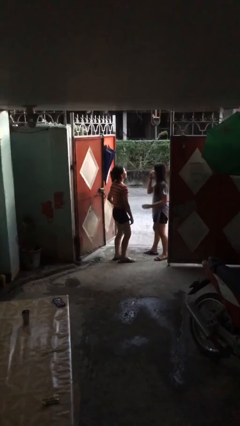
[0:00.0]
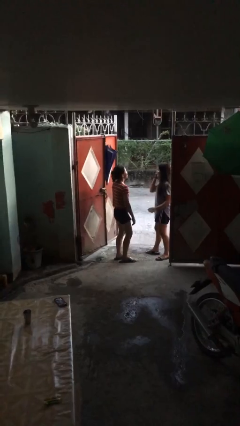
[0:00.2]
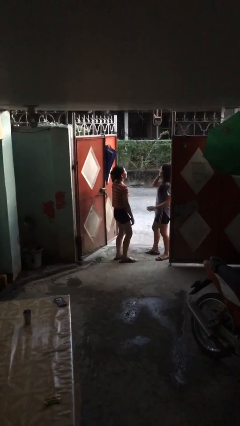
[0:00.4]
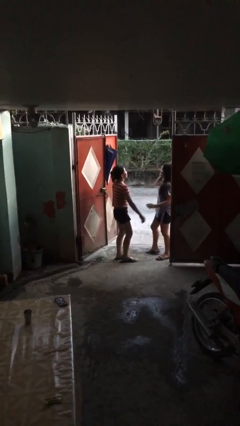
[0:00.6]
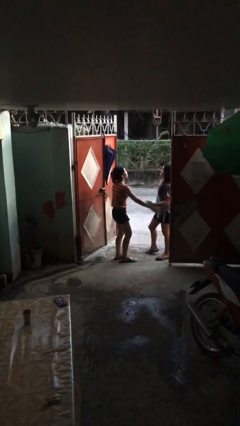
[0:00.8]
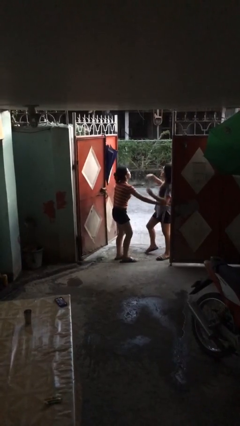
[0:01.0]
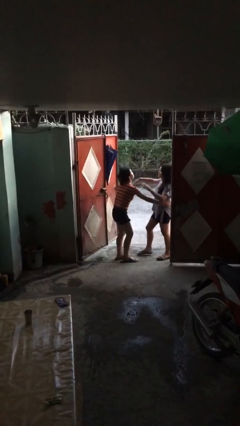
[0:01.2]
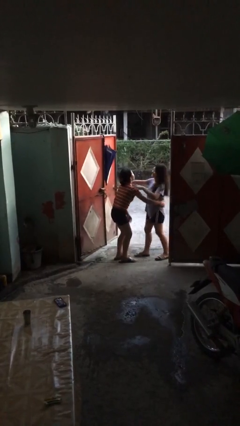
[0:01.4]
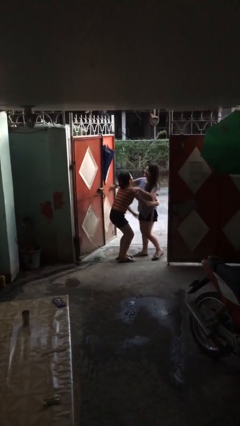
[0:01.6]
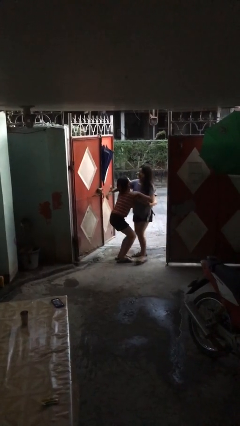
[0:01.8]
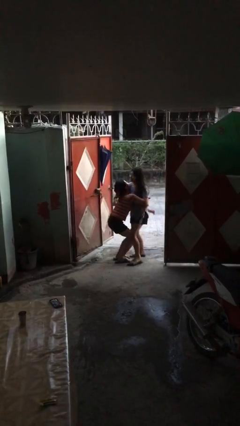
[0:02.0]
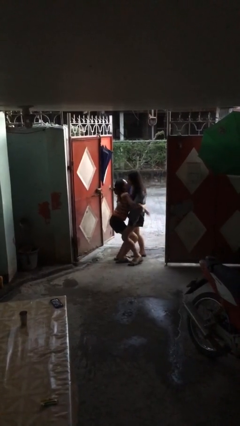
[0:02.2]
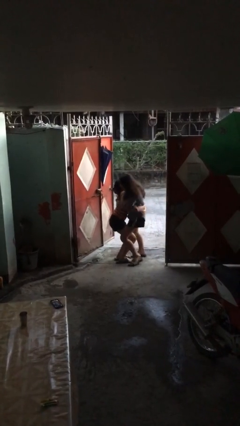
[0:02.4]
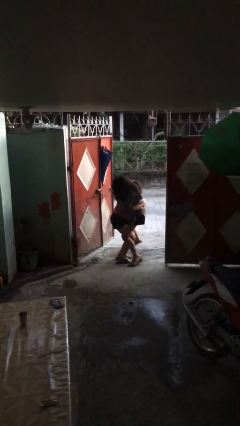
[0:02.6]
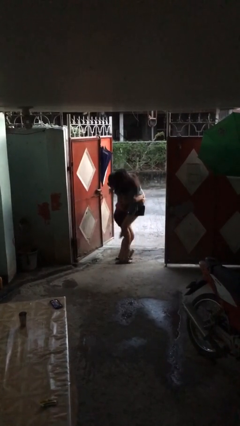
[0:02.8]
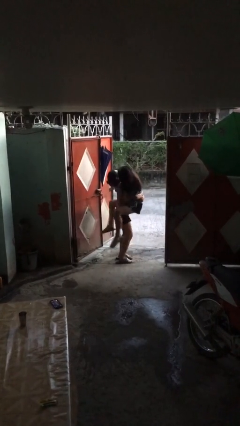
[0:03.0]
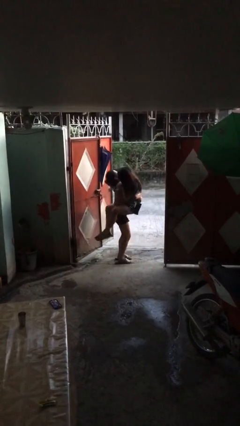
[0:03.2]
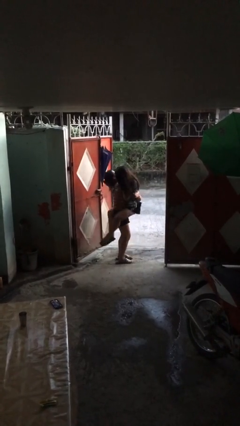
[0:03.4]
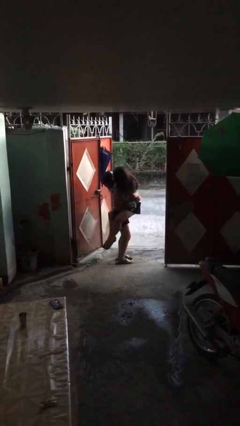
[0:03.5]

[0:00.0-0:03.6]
person picks up person

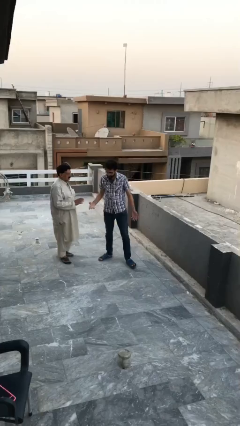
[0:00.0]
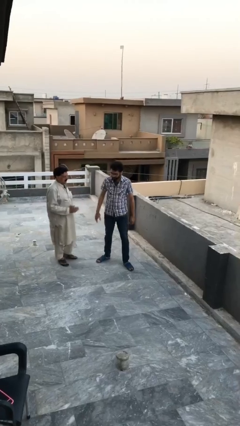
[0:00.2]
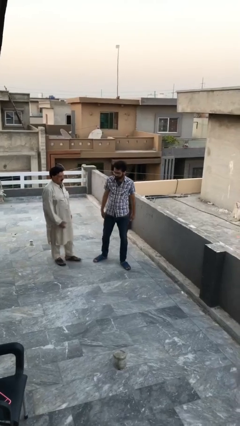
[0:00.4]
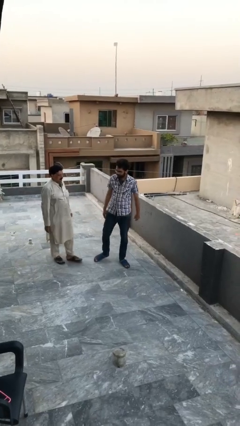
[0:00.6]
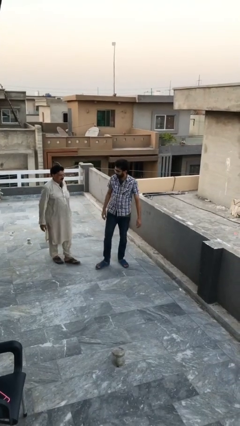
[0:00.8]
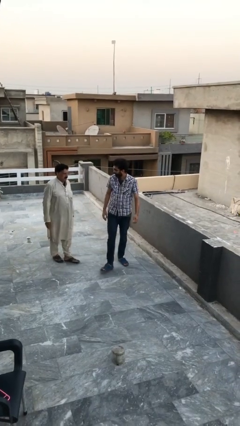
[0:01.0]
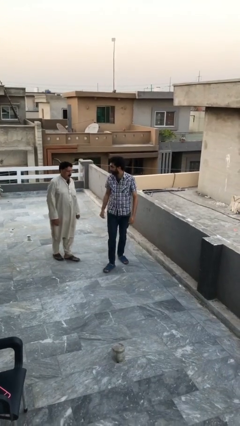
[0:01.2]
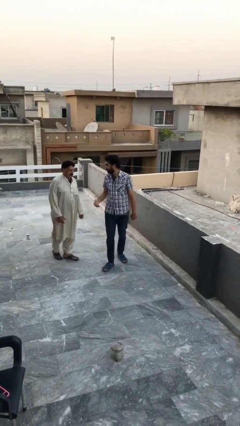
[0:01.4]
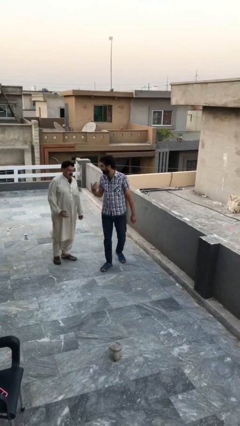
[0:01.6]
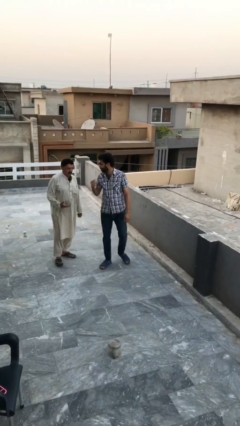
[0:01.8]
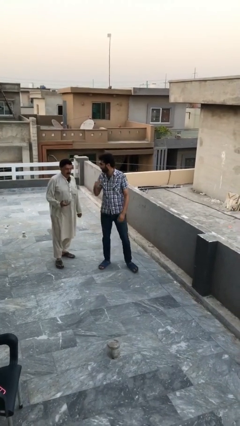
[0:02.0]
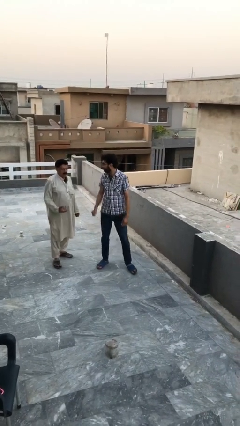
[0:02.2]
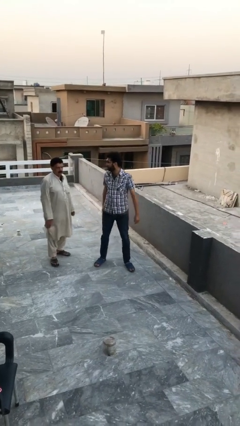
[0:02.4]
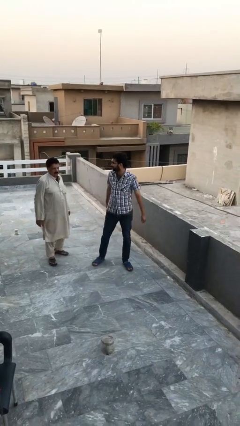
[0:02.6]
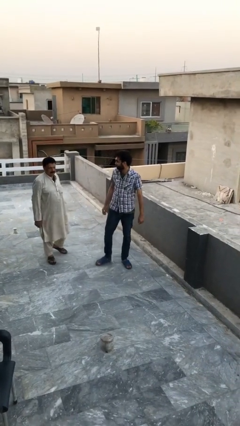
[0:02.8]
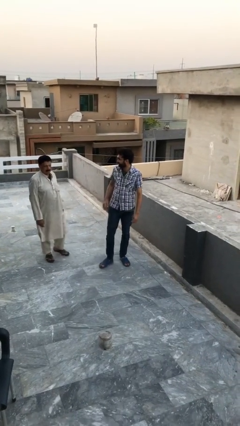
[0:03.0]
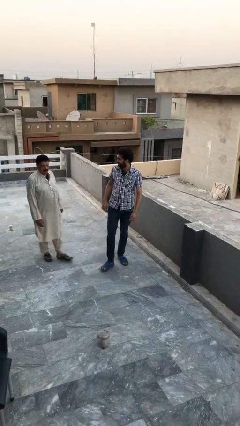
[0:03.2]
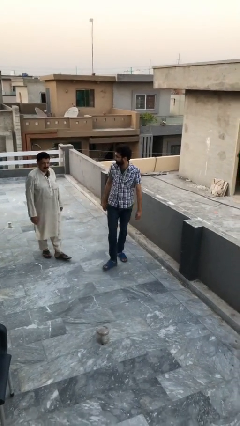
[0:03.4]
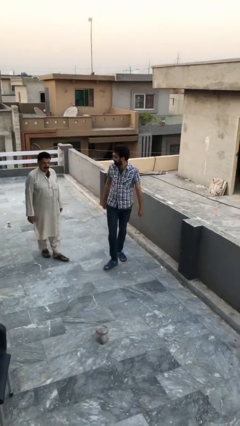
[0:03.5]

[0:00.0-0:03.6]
person talks to person

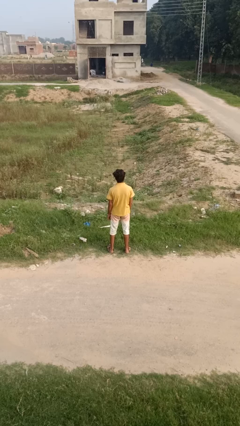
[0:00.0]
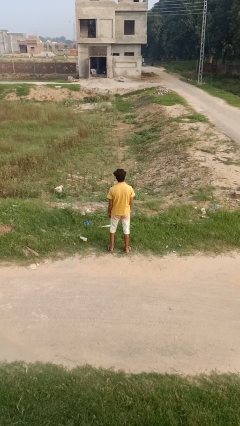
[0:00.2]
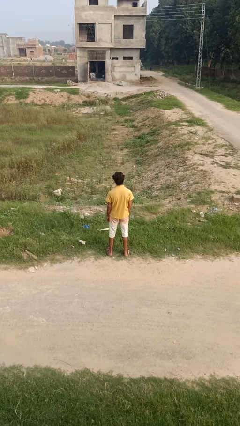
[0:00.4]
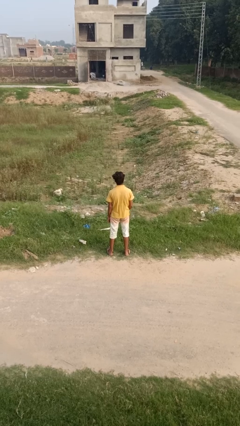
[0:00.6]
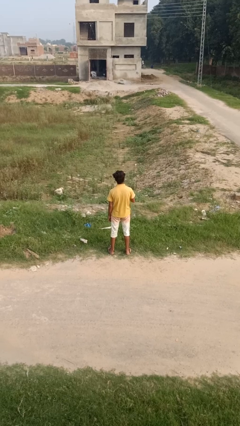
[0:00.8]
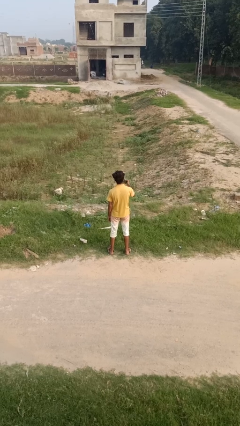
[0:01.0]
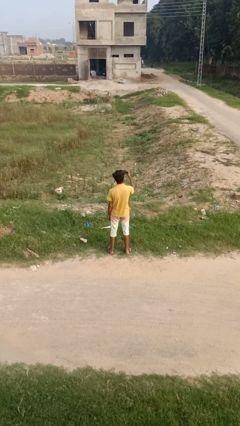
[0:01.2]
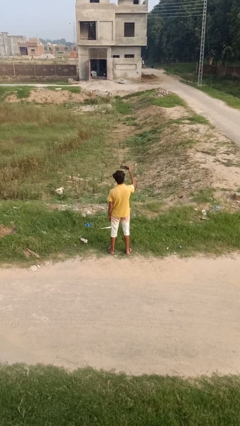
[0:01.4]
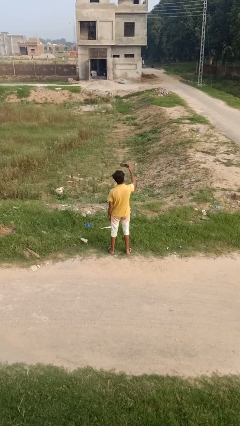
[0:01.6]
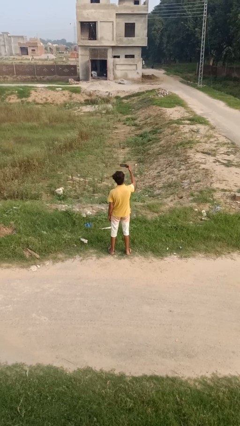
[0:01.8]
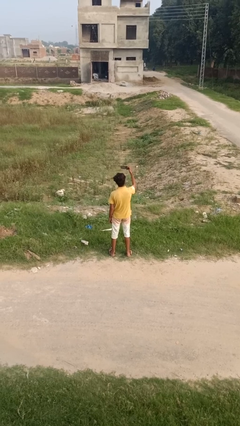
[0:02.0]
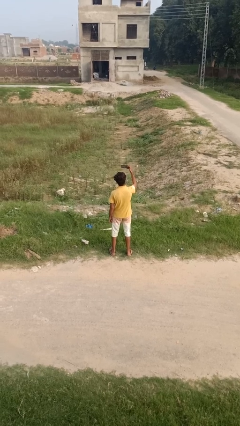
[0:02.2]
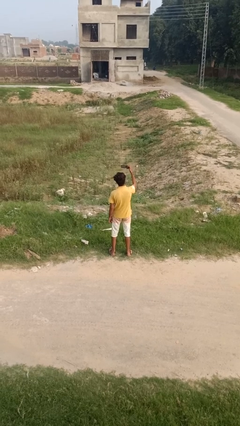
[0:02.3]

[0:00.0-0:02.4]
person takes selfie

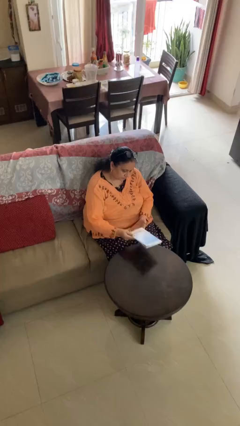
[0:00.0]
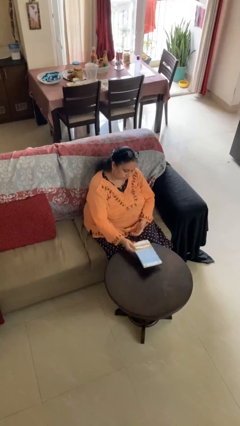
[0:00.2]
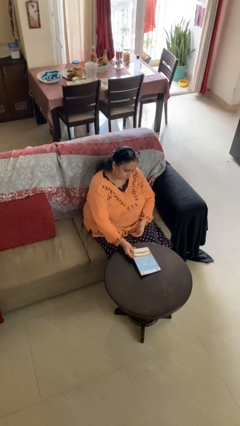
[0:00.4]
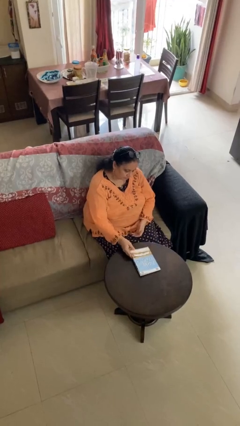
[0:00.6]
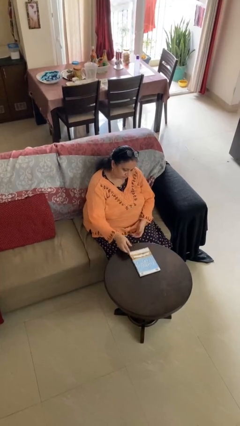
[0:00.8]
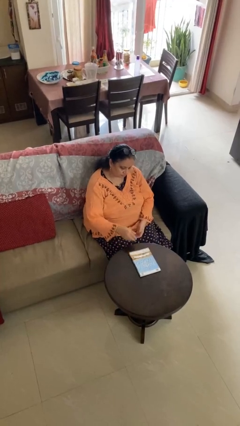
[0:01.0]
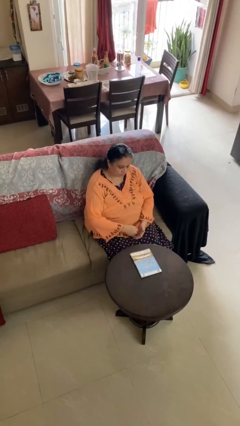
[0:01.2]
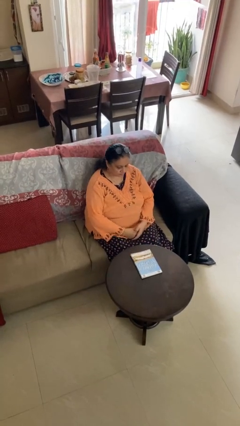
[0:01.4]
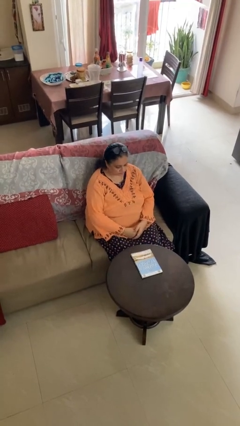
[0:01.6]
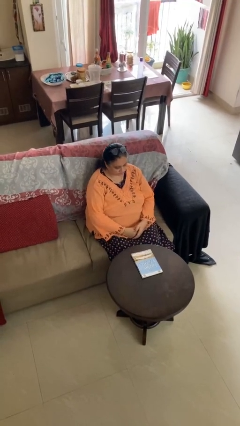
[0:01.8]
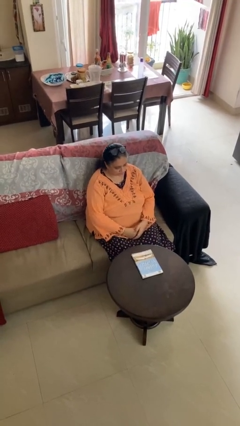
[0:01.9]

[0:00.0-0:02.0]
person puts down object on table

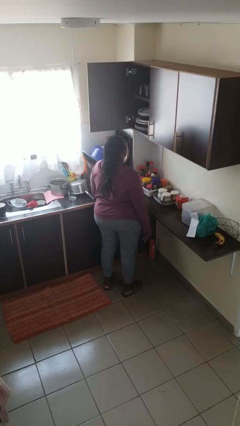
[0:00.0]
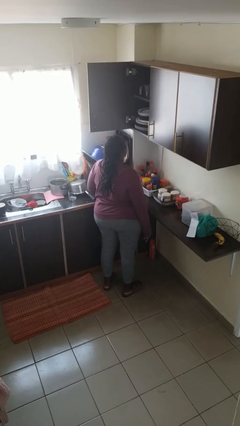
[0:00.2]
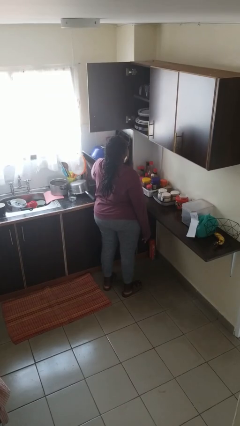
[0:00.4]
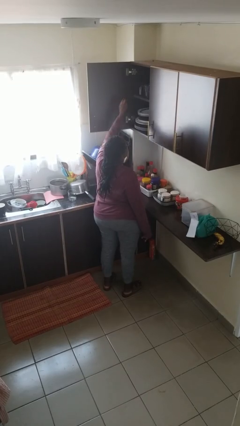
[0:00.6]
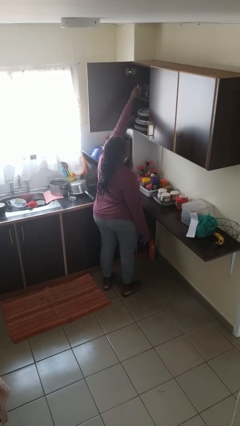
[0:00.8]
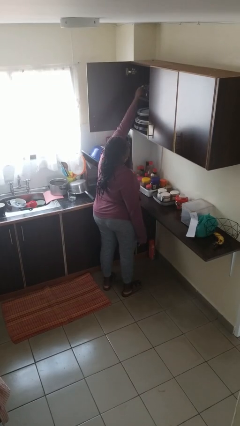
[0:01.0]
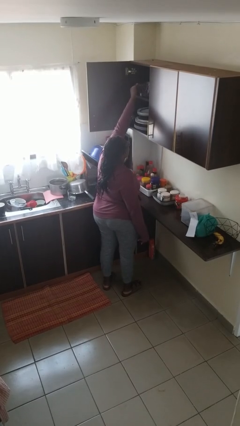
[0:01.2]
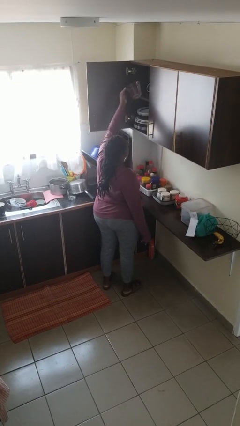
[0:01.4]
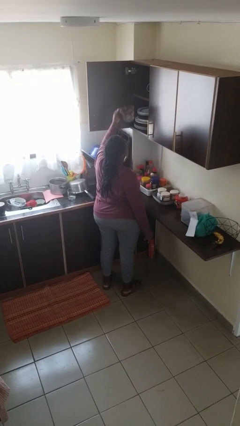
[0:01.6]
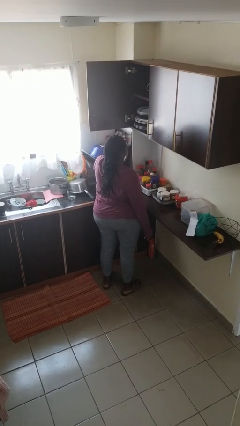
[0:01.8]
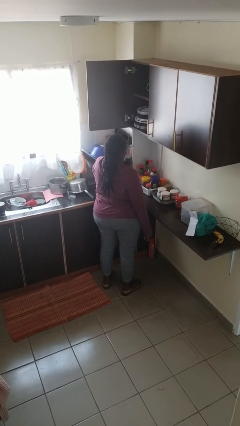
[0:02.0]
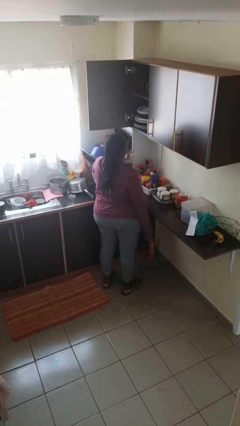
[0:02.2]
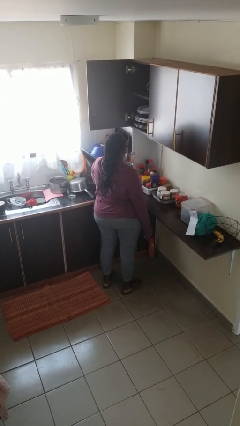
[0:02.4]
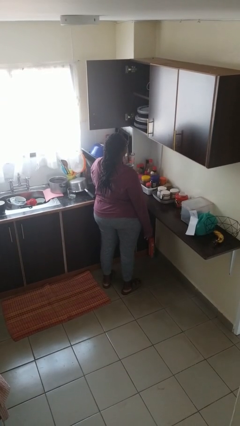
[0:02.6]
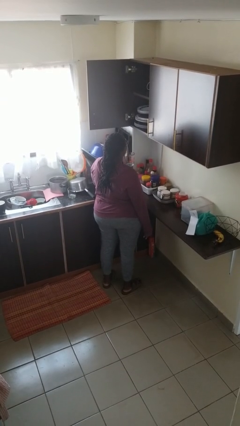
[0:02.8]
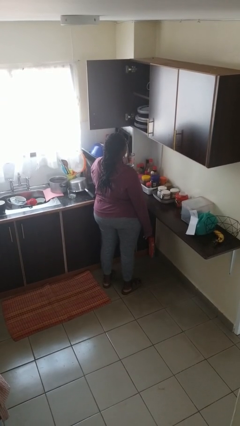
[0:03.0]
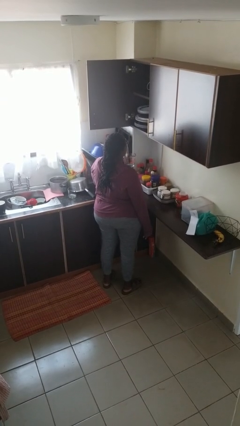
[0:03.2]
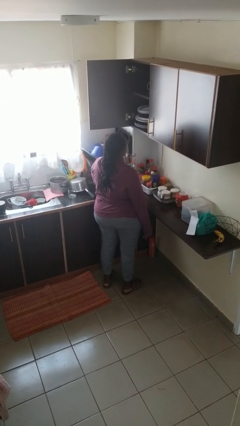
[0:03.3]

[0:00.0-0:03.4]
person picks up object from cabinet

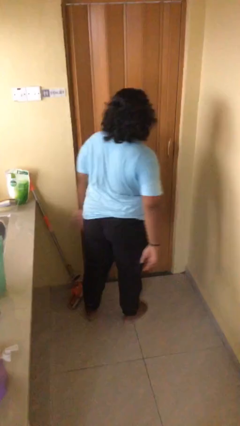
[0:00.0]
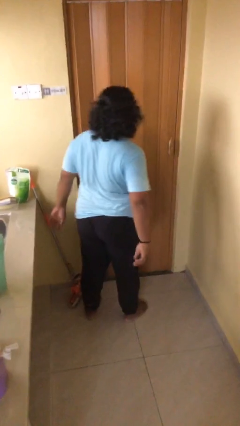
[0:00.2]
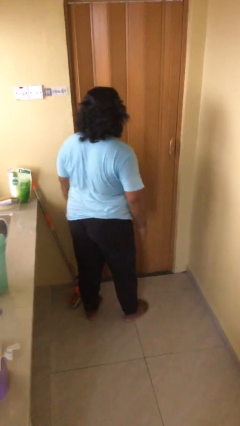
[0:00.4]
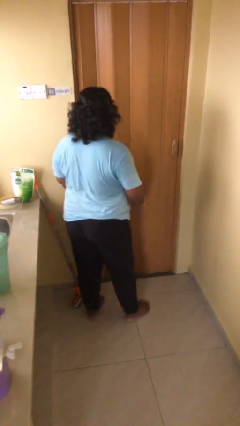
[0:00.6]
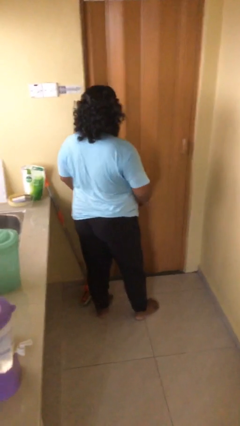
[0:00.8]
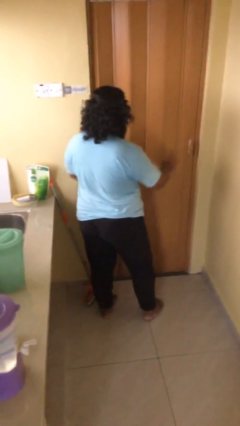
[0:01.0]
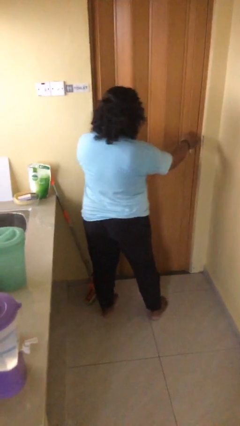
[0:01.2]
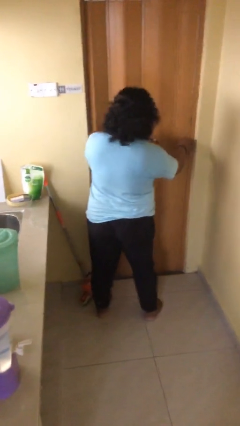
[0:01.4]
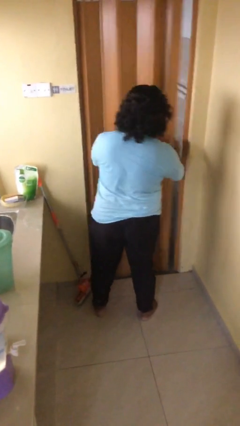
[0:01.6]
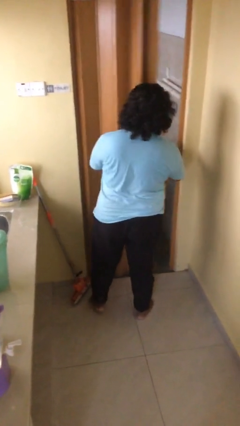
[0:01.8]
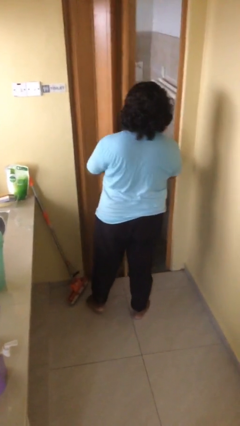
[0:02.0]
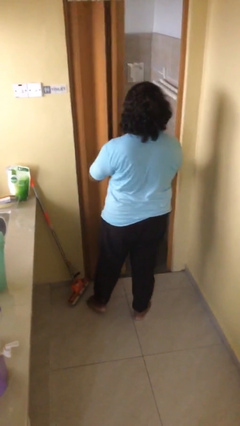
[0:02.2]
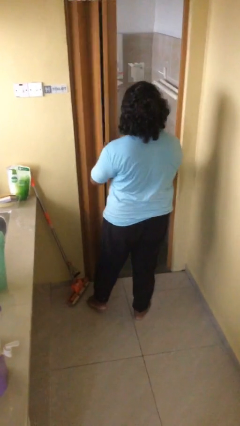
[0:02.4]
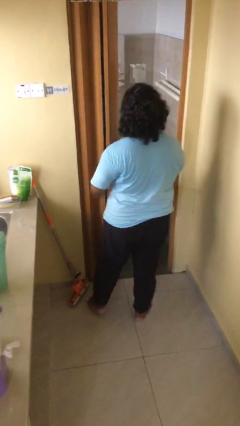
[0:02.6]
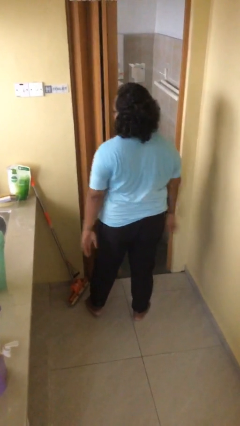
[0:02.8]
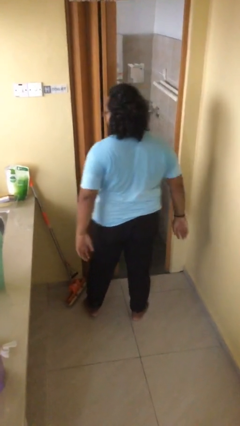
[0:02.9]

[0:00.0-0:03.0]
person opens sliding door
